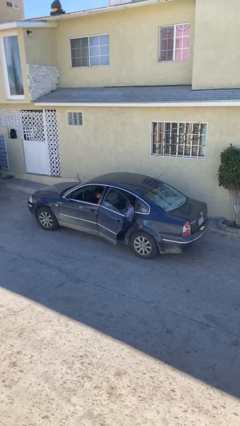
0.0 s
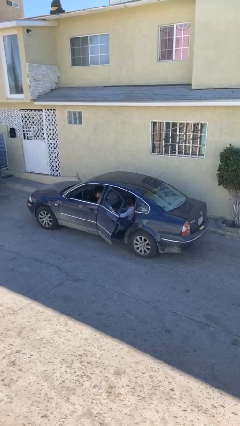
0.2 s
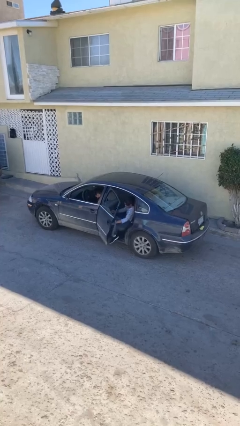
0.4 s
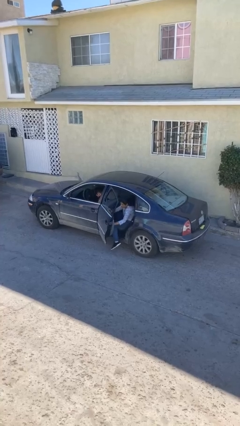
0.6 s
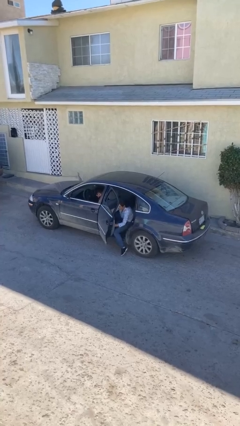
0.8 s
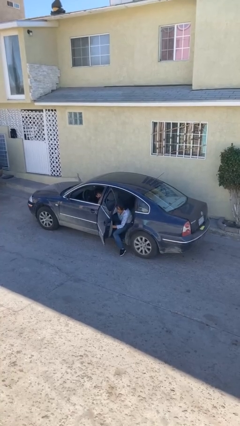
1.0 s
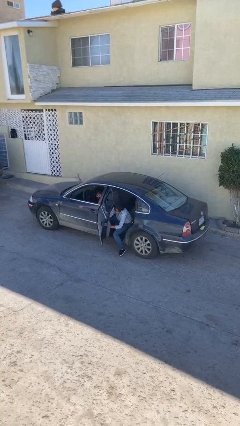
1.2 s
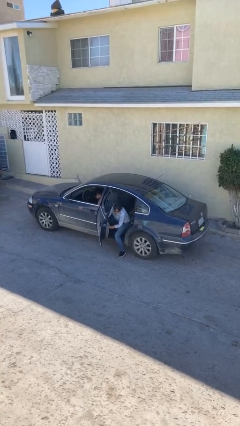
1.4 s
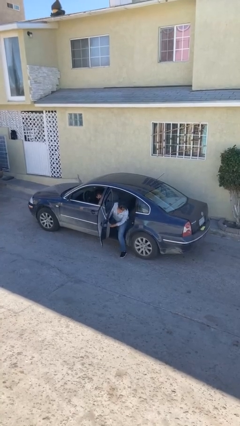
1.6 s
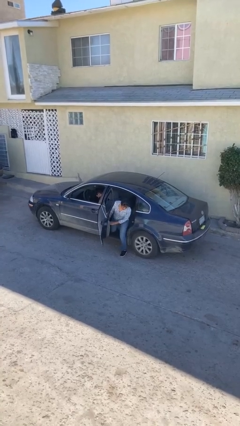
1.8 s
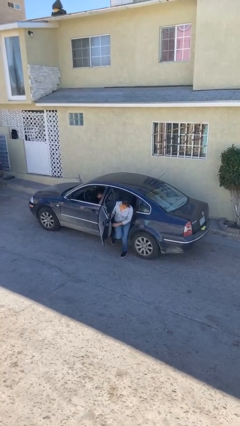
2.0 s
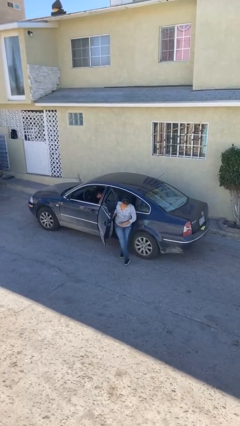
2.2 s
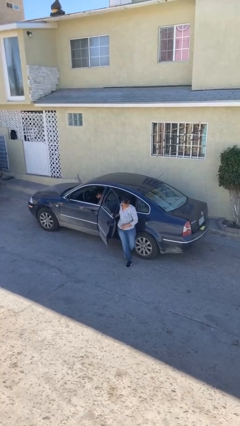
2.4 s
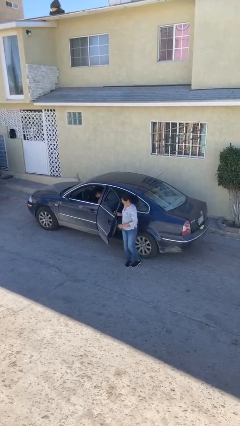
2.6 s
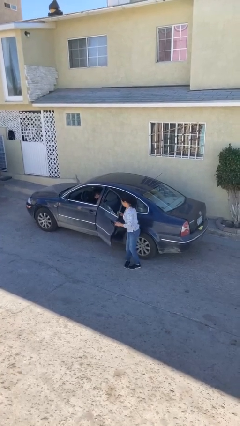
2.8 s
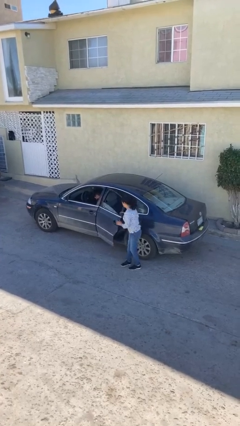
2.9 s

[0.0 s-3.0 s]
car drops off person

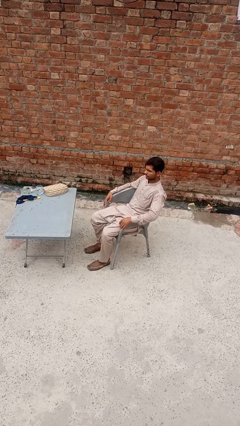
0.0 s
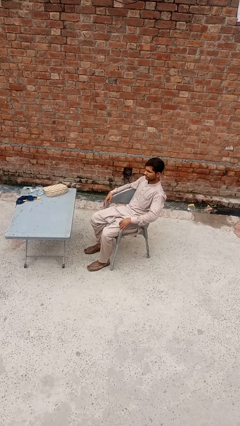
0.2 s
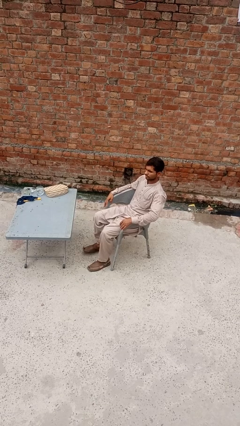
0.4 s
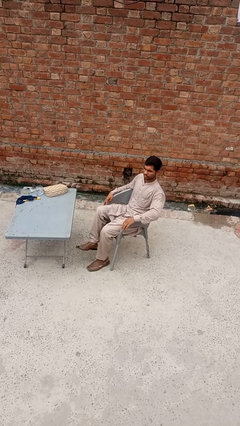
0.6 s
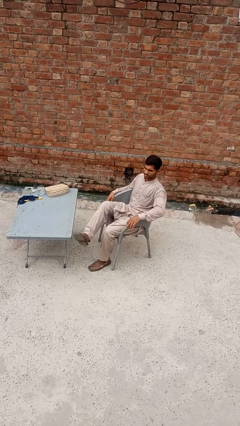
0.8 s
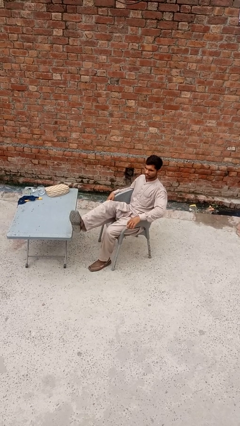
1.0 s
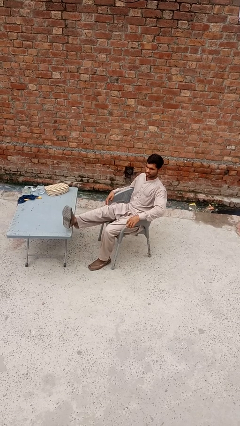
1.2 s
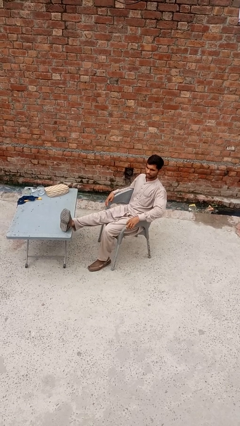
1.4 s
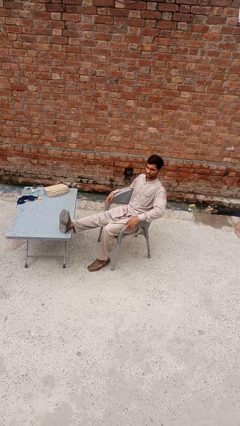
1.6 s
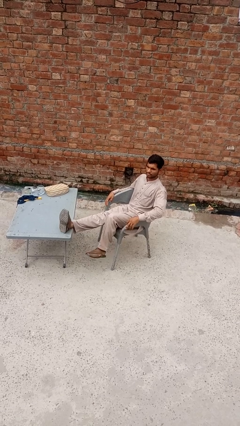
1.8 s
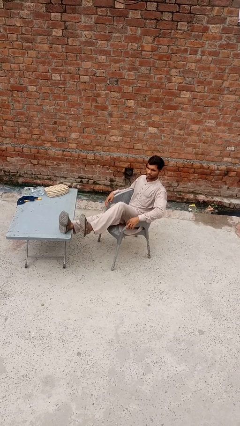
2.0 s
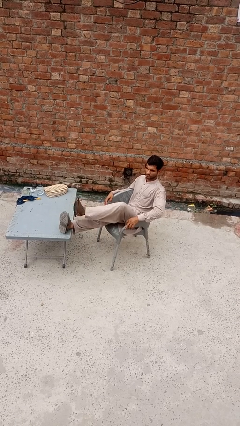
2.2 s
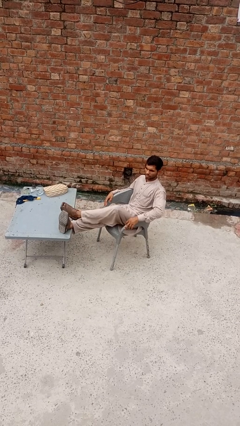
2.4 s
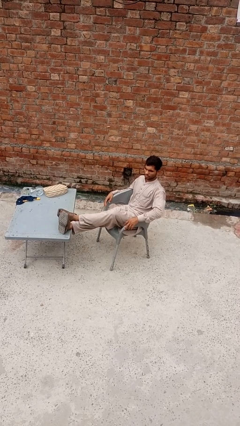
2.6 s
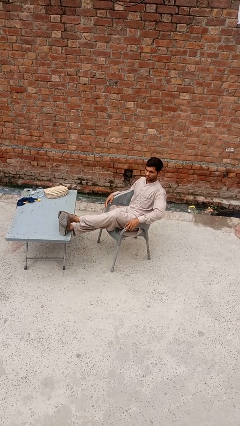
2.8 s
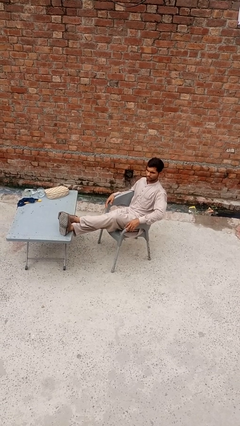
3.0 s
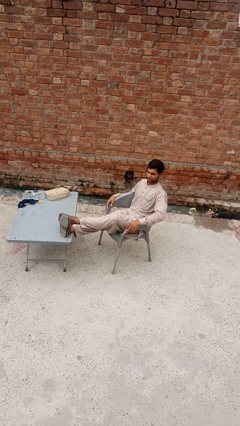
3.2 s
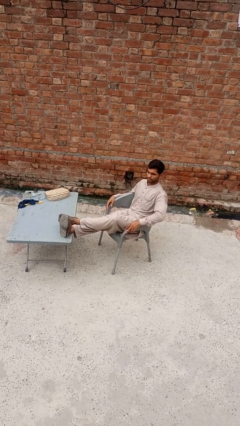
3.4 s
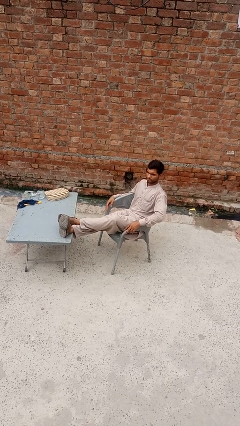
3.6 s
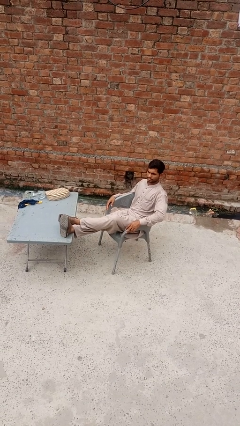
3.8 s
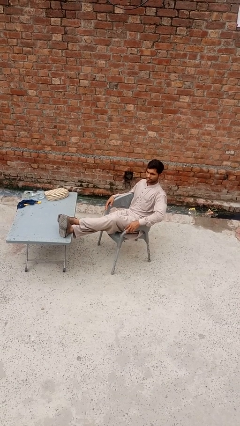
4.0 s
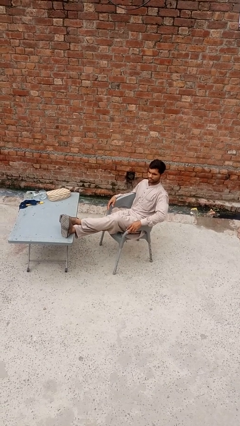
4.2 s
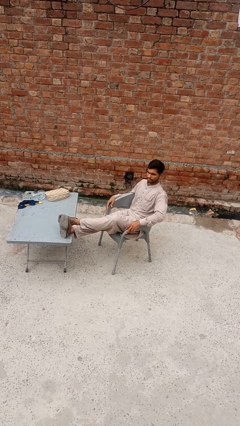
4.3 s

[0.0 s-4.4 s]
person puts feet up

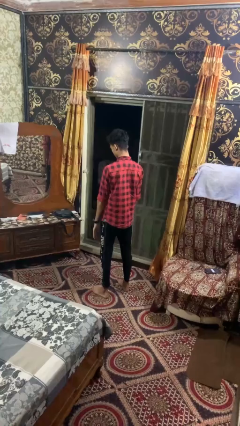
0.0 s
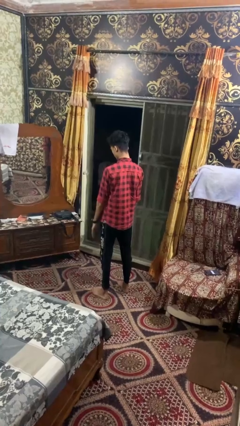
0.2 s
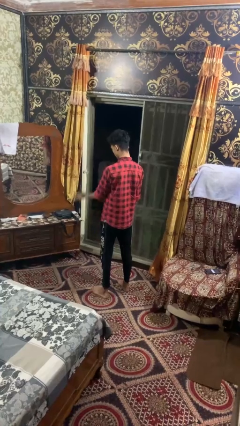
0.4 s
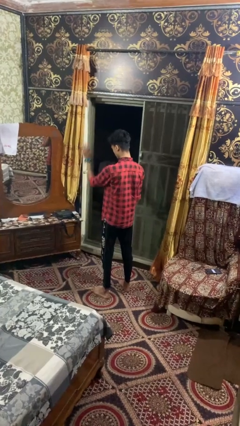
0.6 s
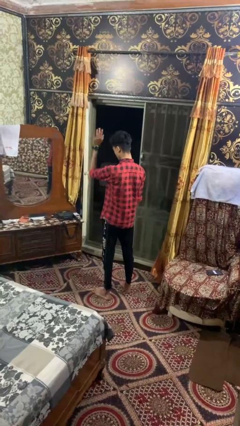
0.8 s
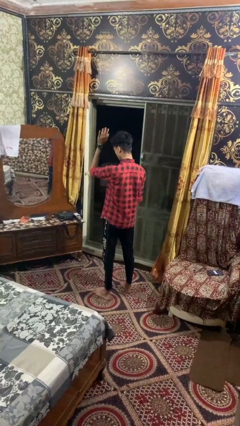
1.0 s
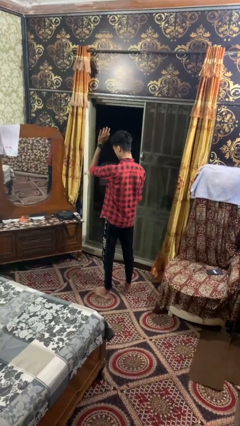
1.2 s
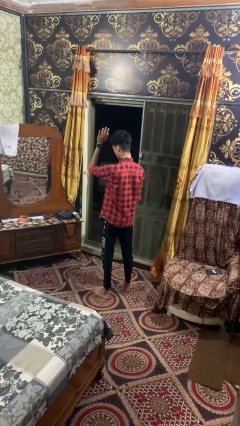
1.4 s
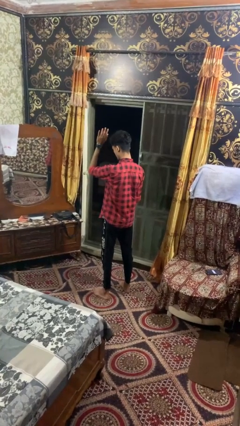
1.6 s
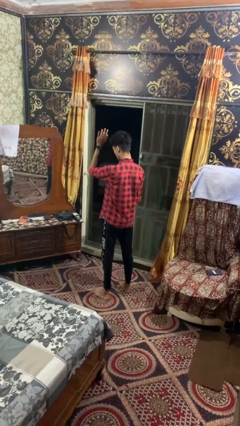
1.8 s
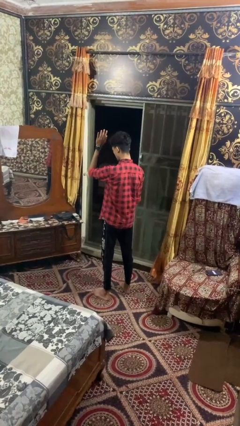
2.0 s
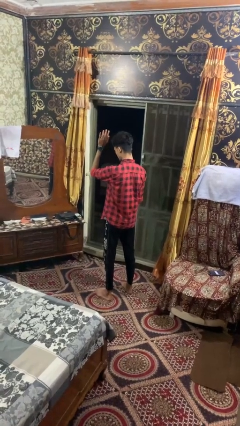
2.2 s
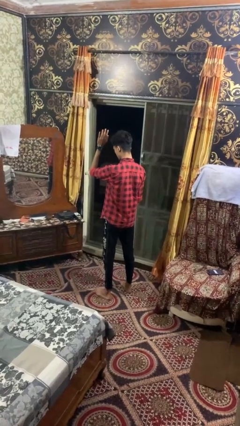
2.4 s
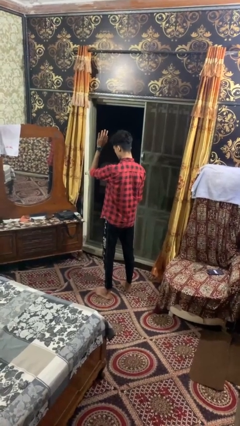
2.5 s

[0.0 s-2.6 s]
person gestures raise hand

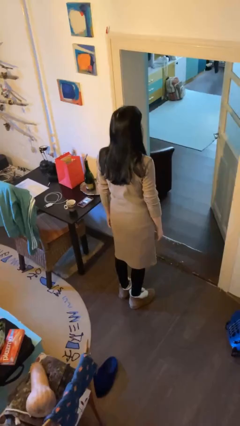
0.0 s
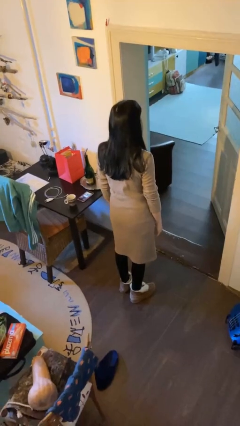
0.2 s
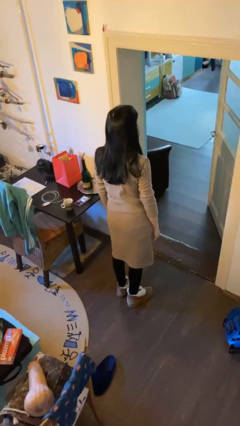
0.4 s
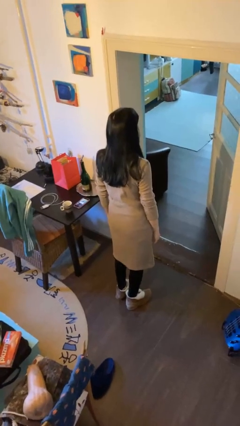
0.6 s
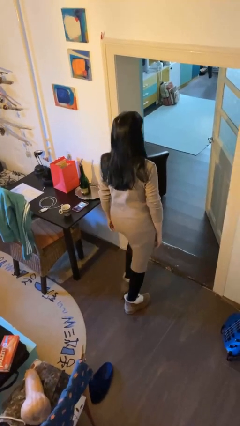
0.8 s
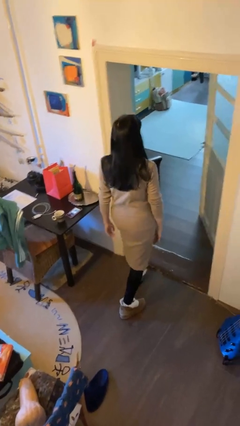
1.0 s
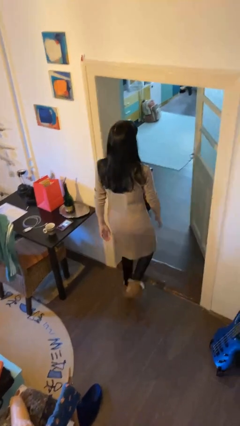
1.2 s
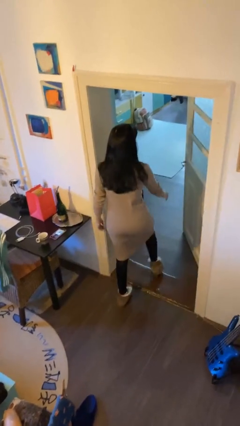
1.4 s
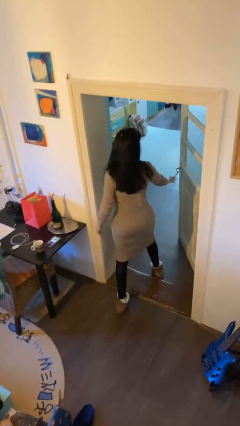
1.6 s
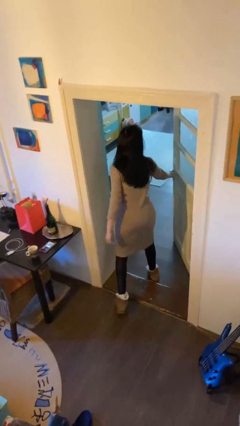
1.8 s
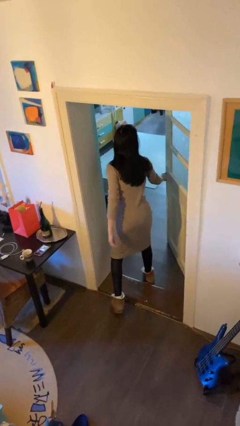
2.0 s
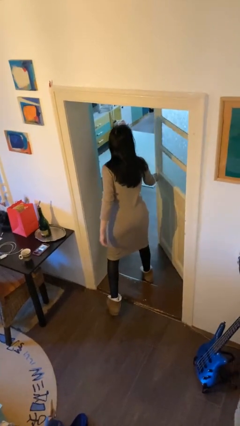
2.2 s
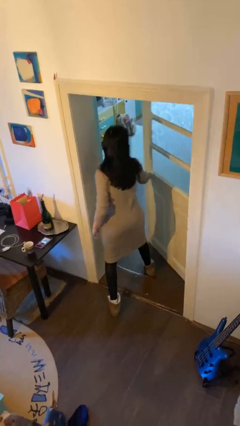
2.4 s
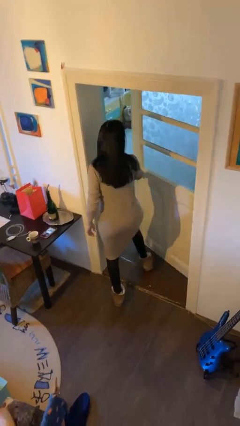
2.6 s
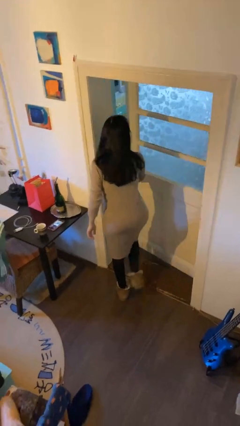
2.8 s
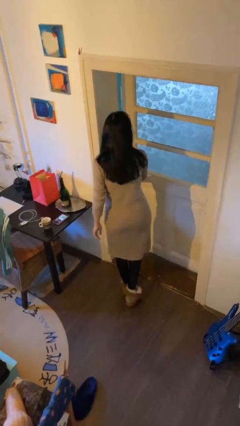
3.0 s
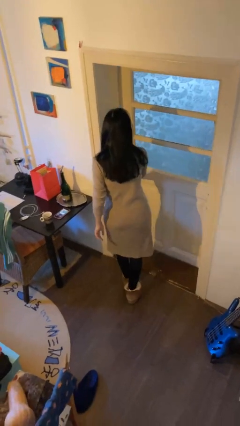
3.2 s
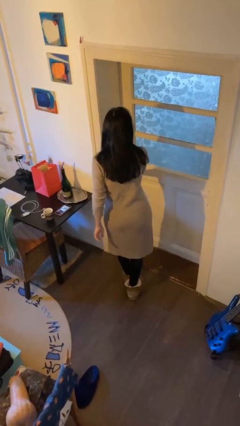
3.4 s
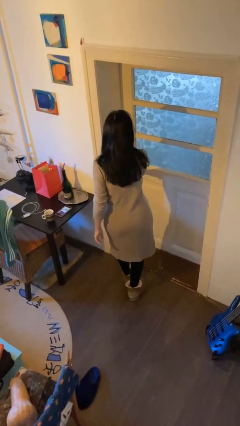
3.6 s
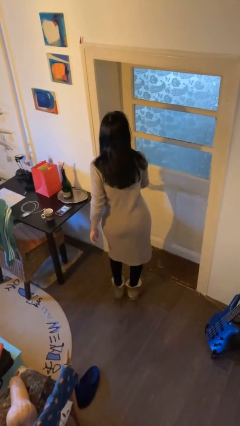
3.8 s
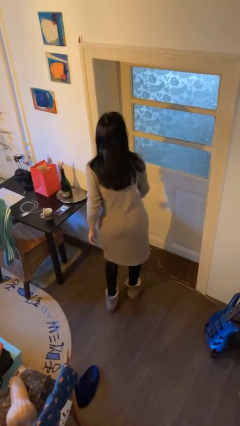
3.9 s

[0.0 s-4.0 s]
person closes facility door

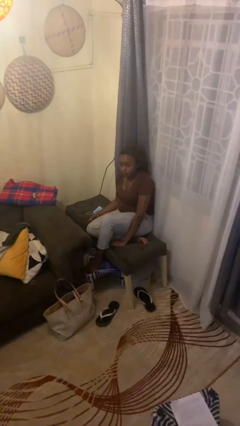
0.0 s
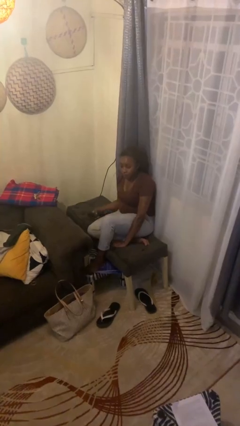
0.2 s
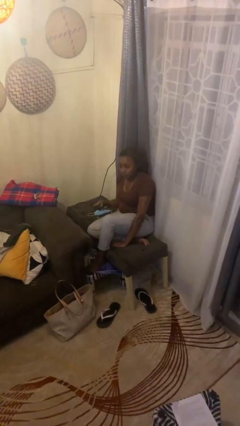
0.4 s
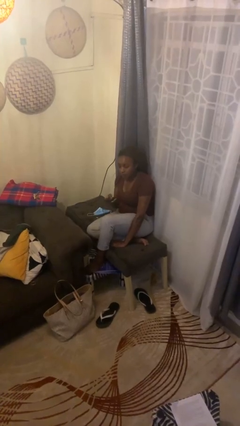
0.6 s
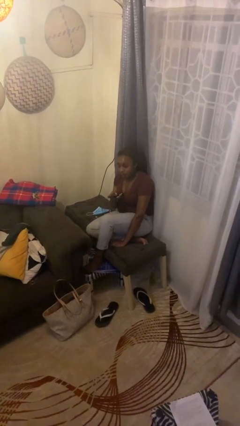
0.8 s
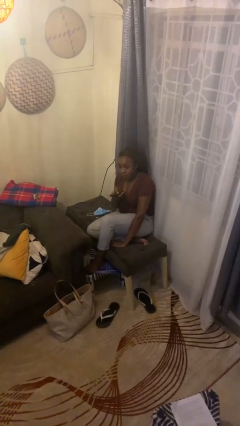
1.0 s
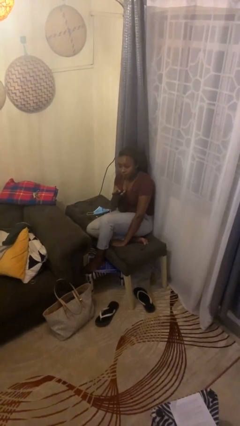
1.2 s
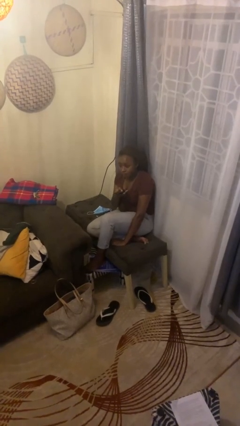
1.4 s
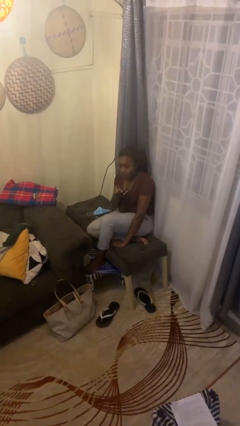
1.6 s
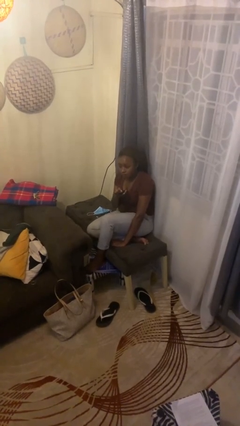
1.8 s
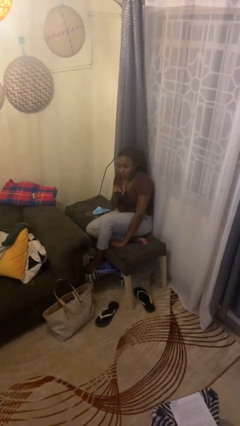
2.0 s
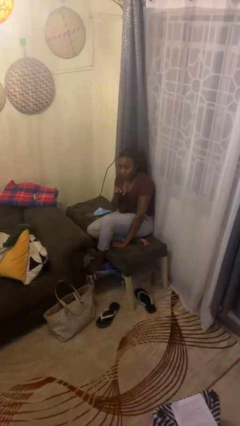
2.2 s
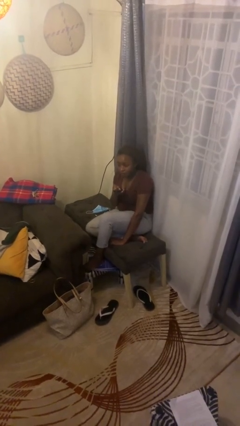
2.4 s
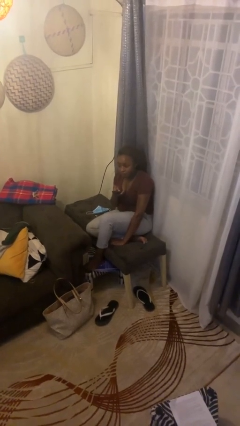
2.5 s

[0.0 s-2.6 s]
person uses television remote

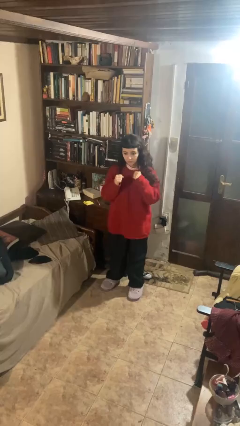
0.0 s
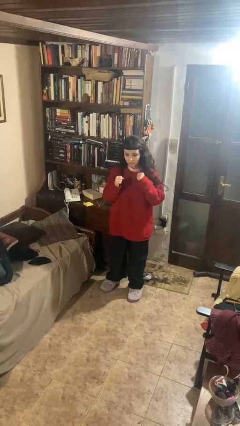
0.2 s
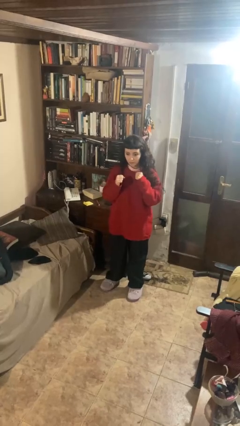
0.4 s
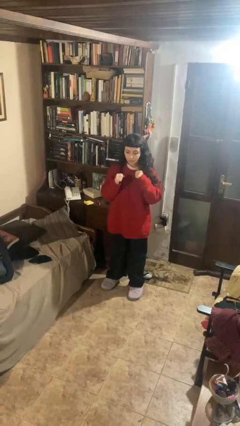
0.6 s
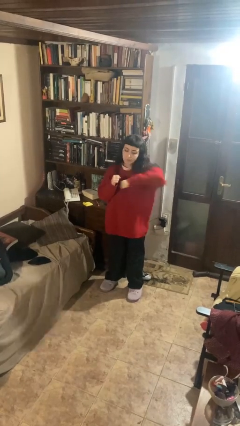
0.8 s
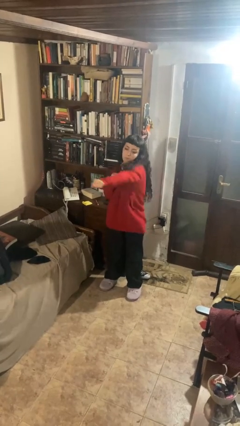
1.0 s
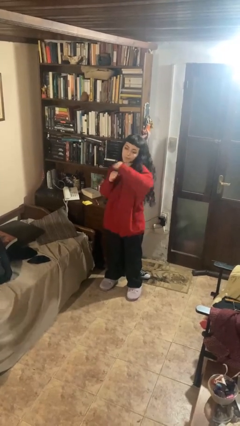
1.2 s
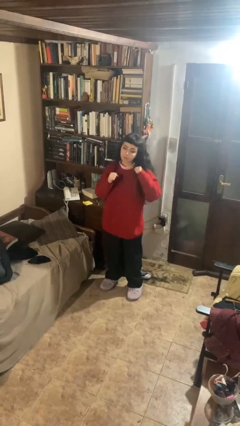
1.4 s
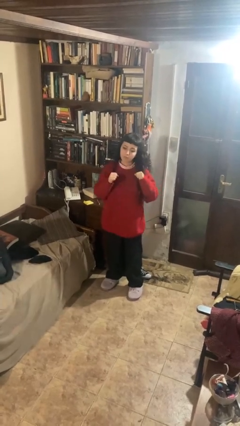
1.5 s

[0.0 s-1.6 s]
person punches
